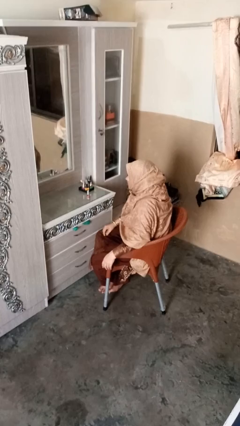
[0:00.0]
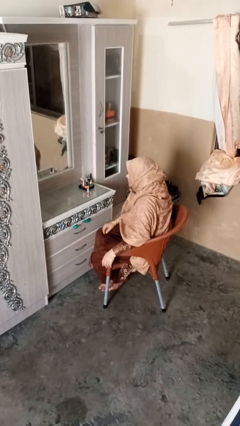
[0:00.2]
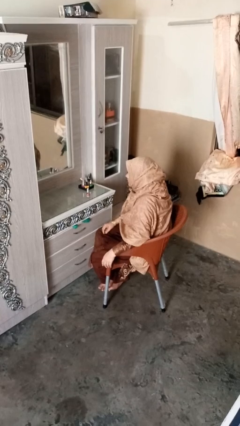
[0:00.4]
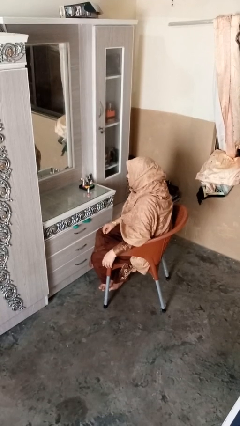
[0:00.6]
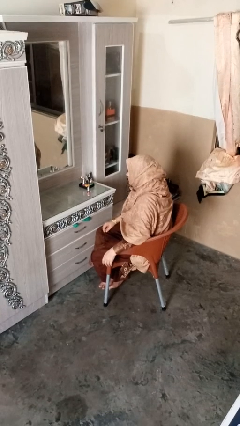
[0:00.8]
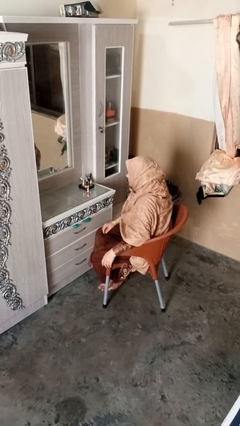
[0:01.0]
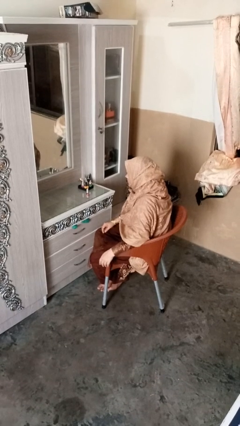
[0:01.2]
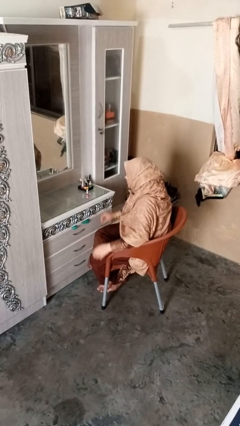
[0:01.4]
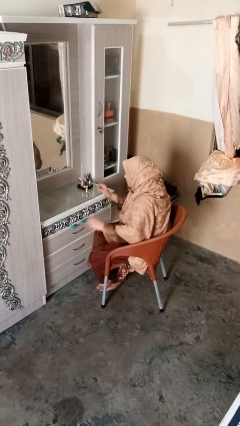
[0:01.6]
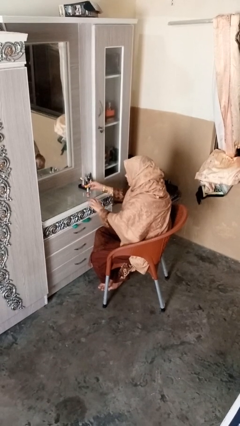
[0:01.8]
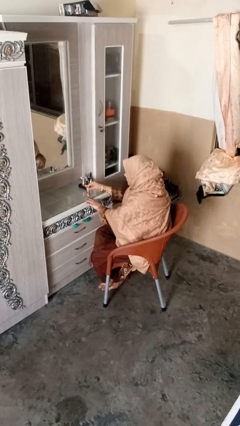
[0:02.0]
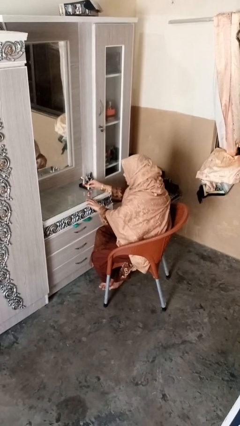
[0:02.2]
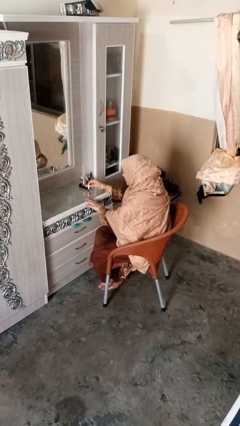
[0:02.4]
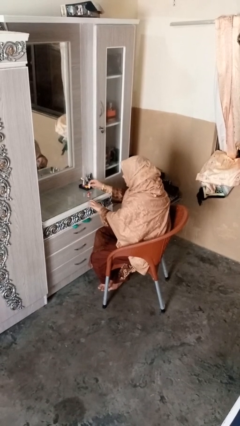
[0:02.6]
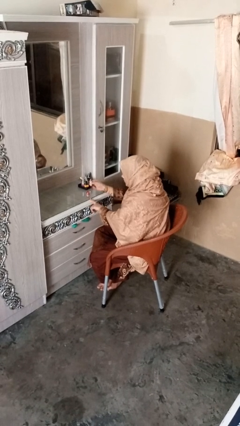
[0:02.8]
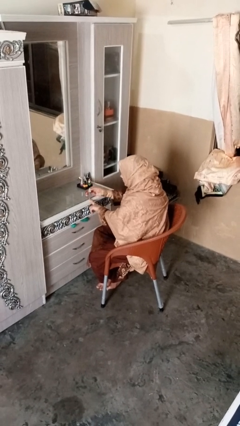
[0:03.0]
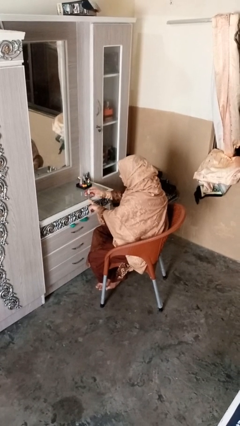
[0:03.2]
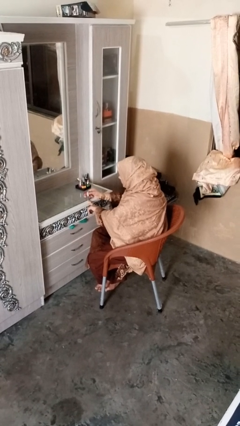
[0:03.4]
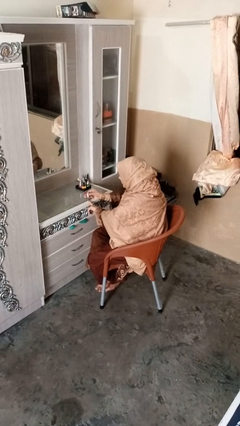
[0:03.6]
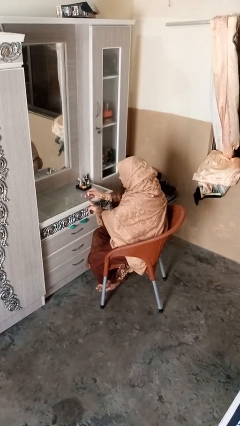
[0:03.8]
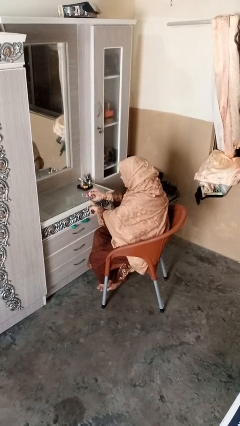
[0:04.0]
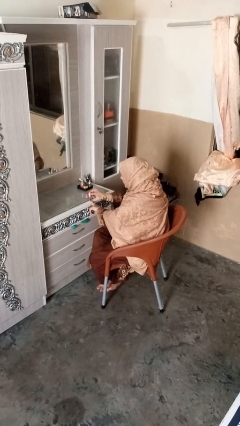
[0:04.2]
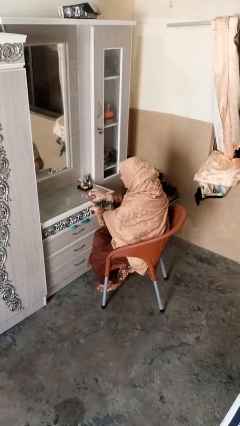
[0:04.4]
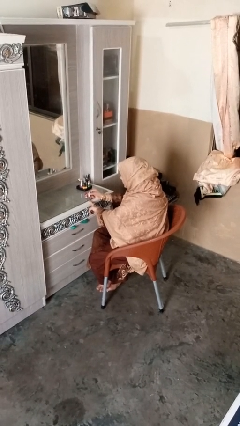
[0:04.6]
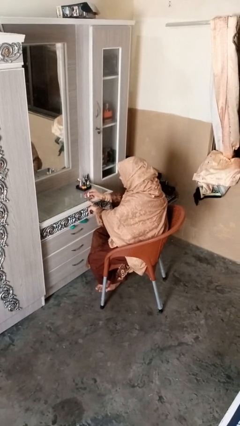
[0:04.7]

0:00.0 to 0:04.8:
person paints fingernails

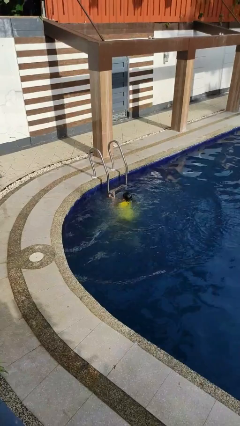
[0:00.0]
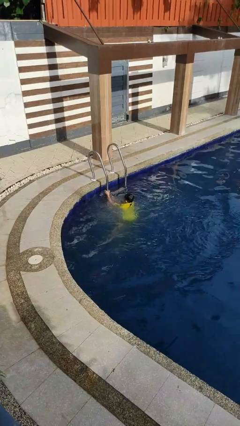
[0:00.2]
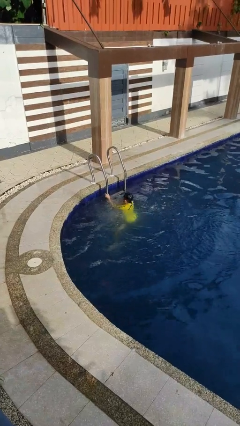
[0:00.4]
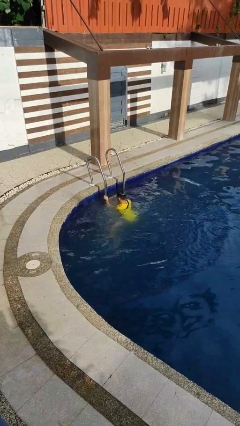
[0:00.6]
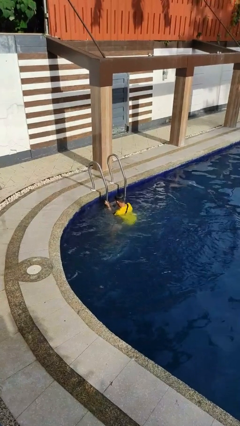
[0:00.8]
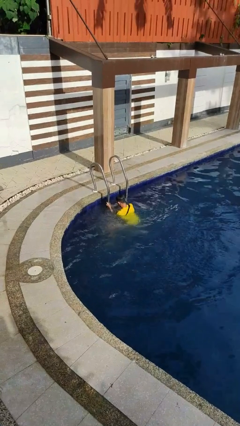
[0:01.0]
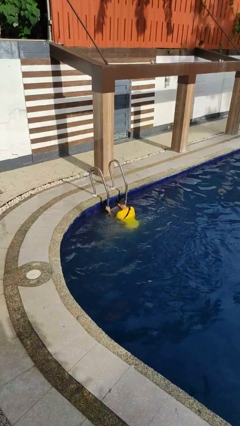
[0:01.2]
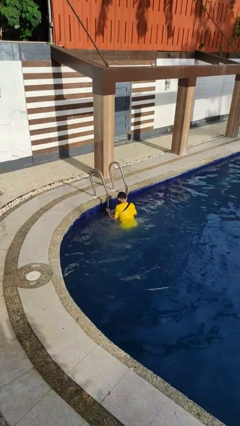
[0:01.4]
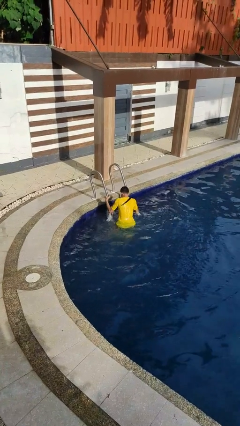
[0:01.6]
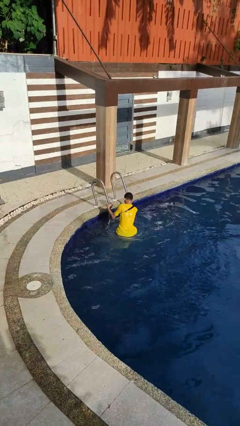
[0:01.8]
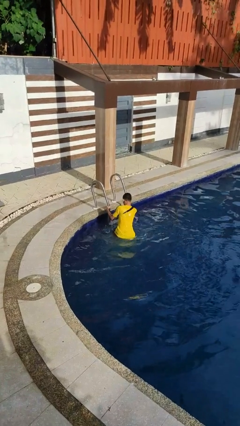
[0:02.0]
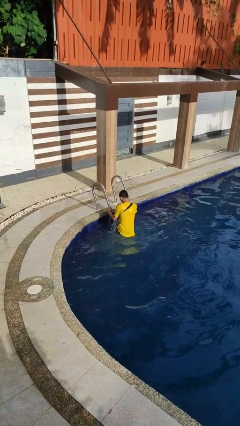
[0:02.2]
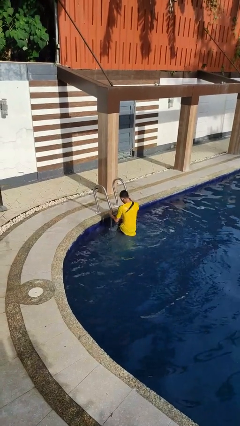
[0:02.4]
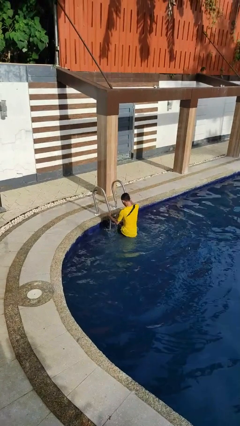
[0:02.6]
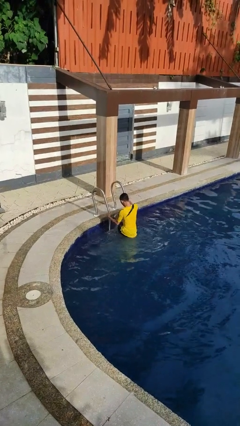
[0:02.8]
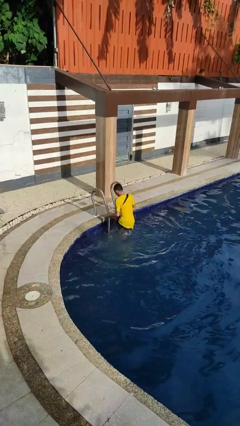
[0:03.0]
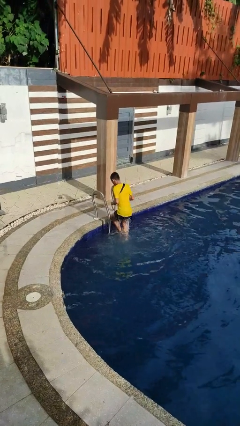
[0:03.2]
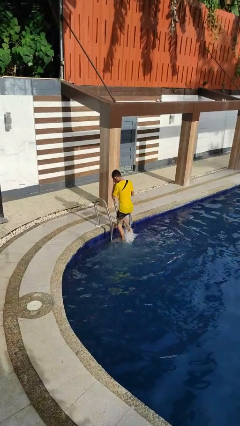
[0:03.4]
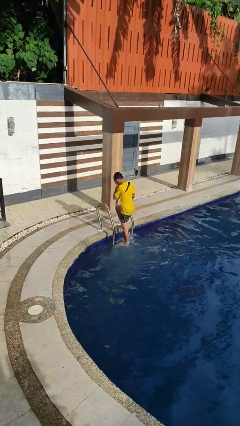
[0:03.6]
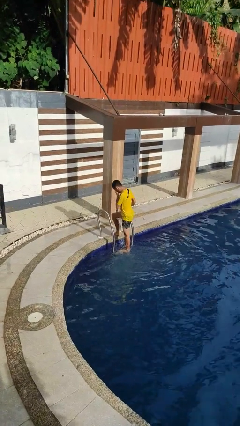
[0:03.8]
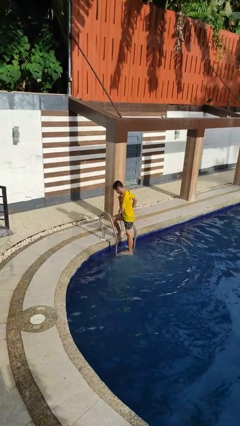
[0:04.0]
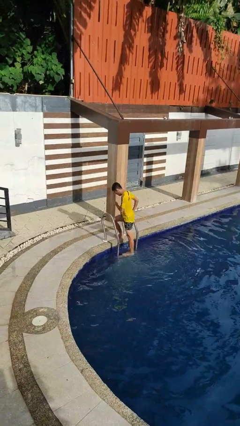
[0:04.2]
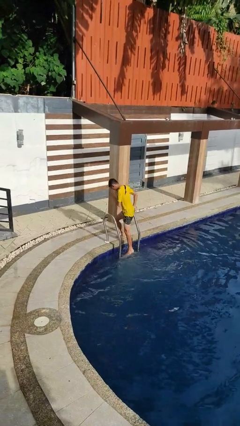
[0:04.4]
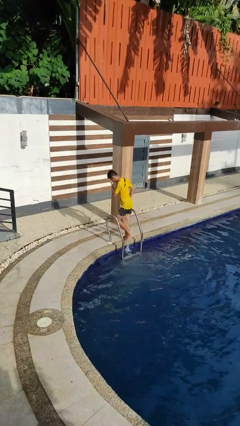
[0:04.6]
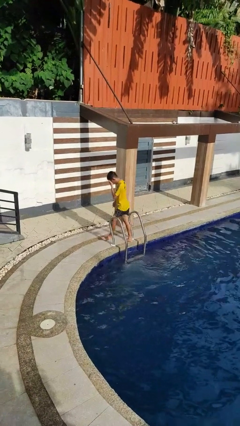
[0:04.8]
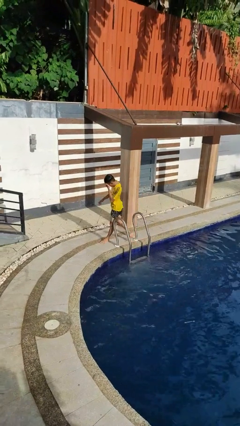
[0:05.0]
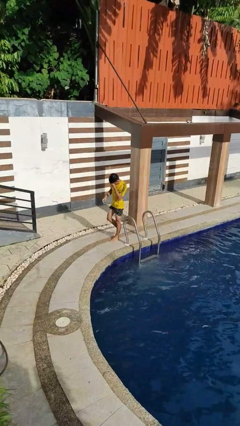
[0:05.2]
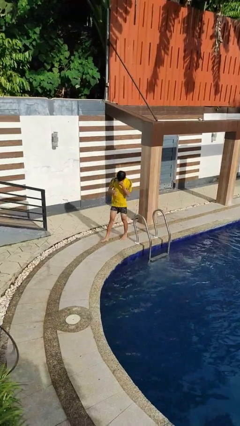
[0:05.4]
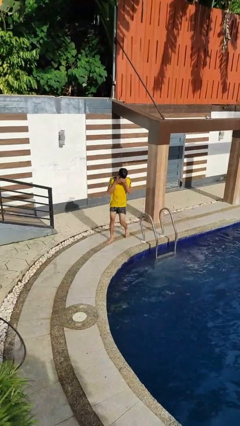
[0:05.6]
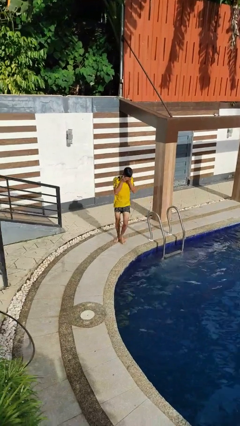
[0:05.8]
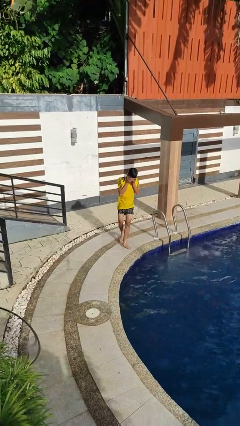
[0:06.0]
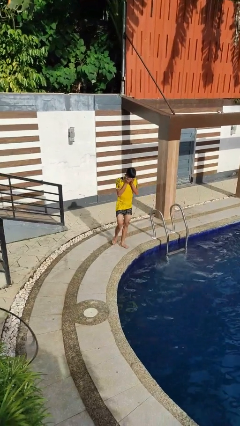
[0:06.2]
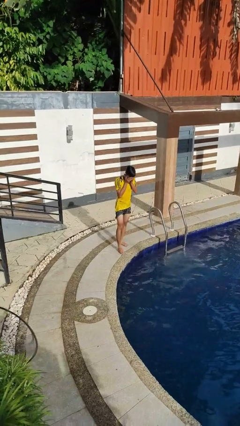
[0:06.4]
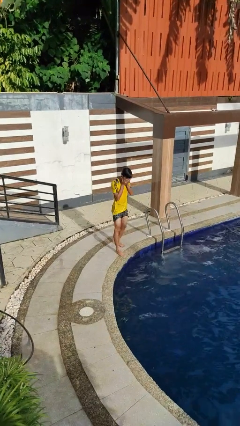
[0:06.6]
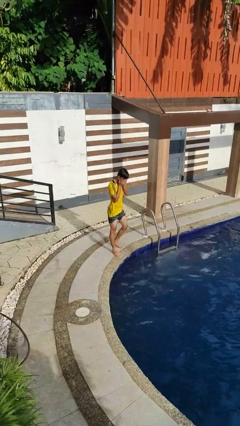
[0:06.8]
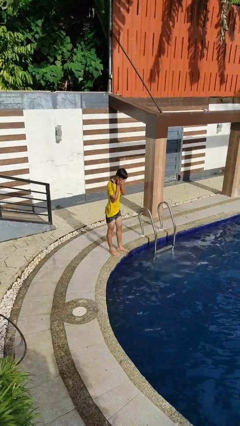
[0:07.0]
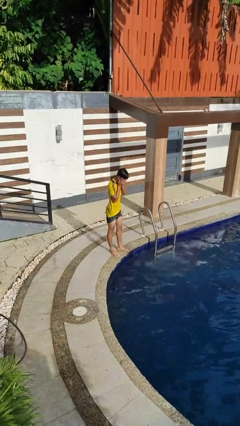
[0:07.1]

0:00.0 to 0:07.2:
person exits pool

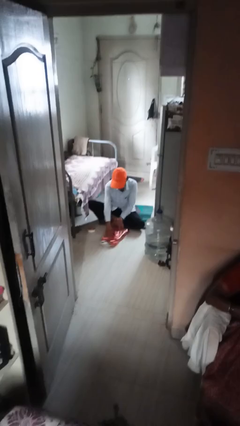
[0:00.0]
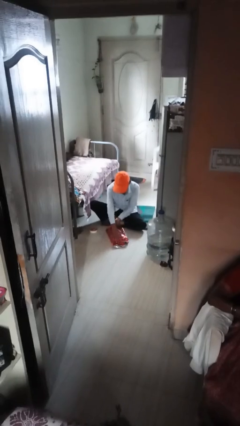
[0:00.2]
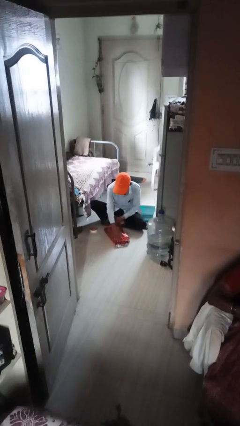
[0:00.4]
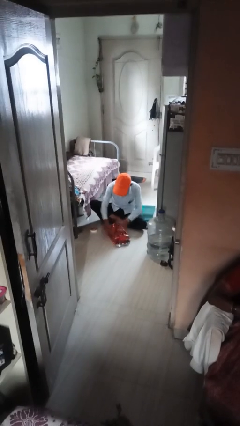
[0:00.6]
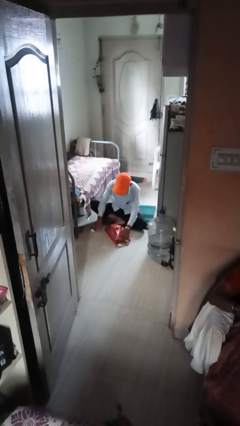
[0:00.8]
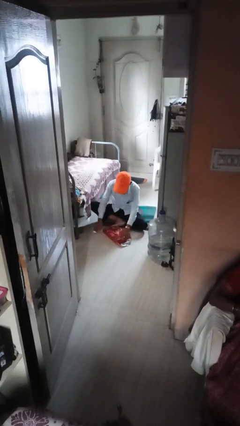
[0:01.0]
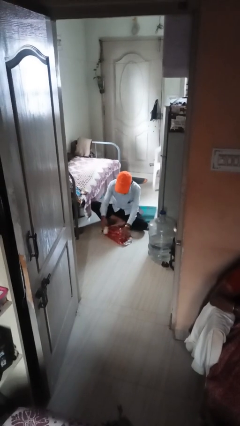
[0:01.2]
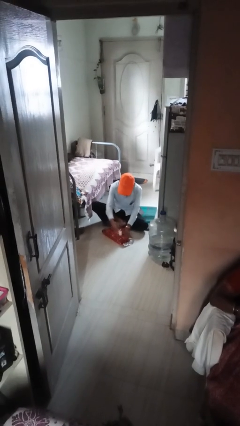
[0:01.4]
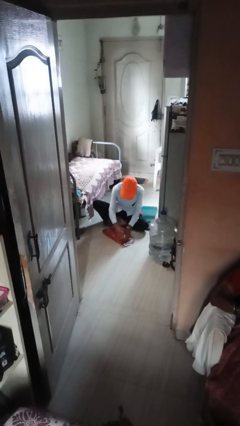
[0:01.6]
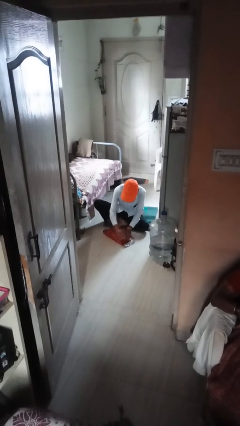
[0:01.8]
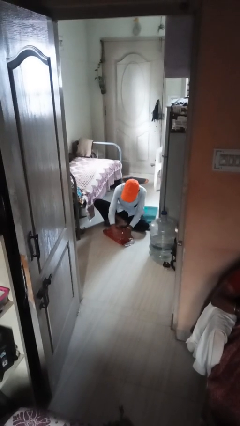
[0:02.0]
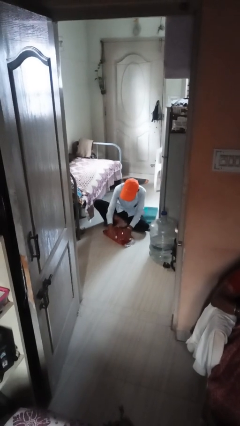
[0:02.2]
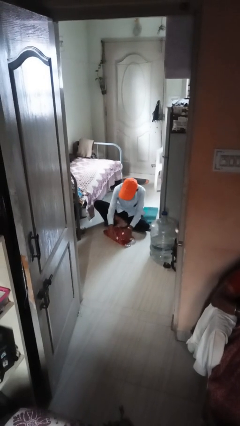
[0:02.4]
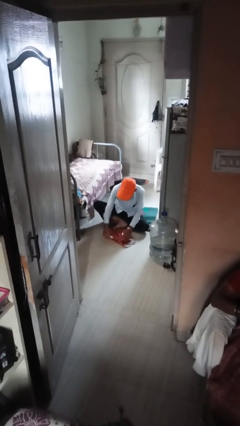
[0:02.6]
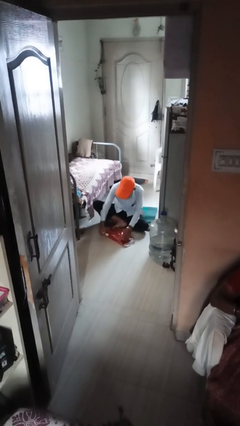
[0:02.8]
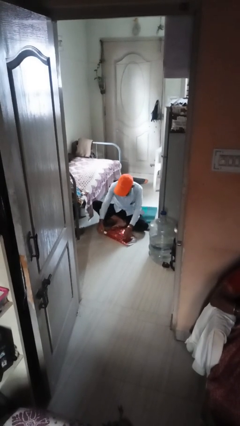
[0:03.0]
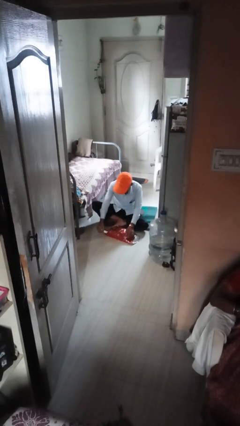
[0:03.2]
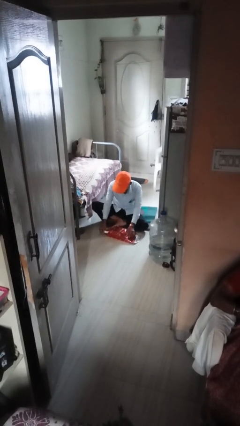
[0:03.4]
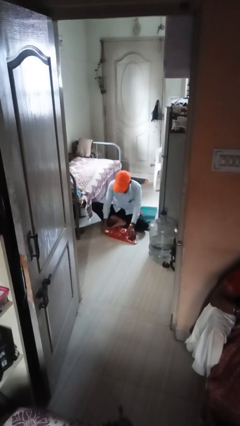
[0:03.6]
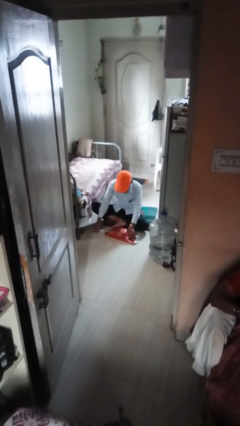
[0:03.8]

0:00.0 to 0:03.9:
person wraps box

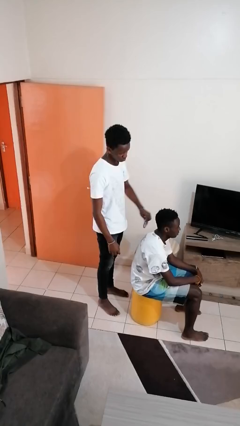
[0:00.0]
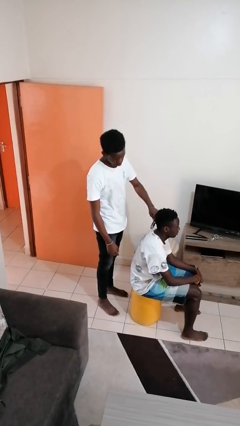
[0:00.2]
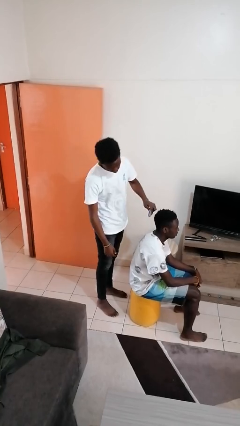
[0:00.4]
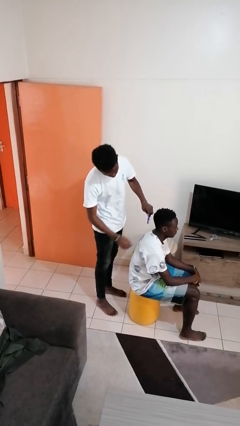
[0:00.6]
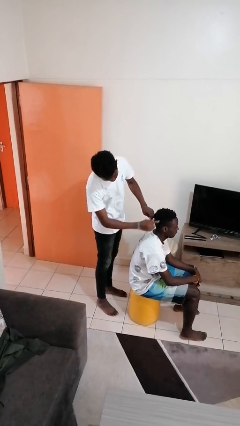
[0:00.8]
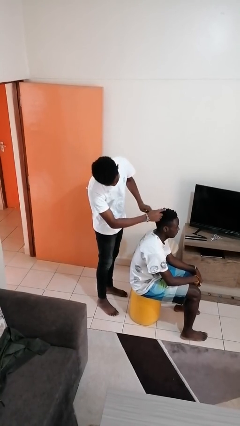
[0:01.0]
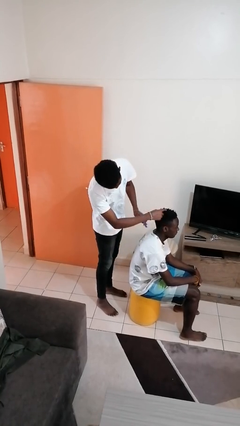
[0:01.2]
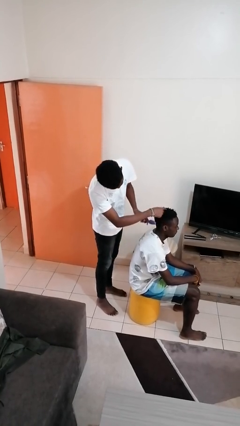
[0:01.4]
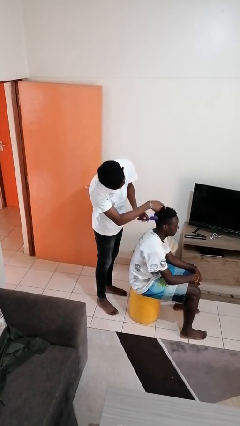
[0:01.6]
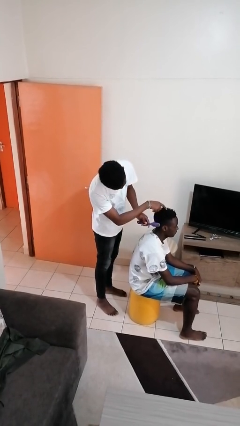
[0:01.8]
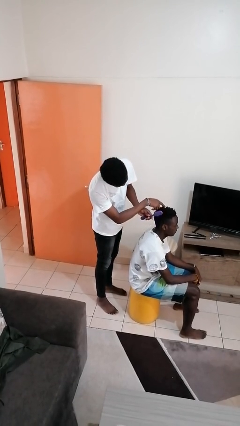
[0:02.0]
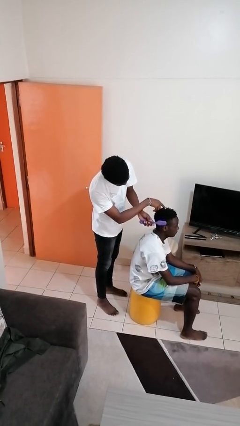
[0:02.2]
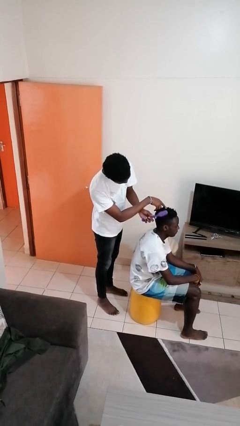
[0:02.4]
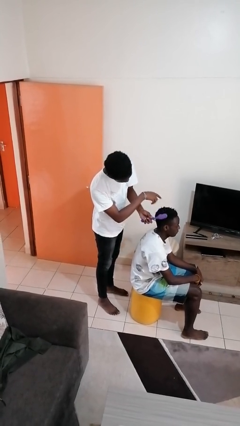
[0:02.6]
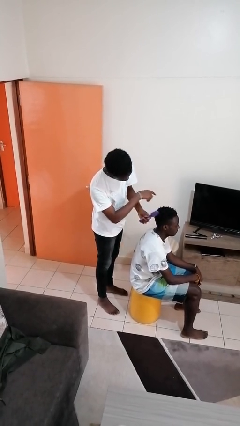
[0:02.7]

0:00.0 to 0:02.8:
person brushes hair of person
